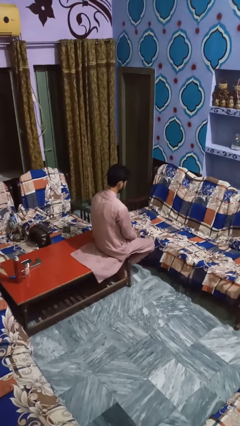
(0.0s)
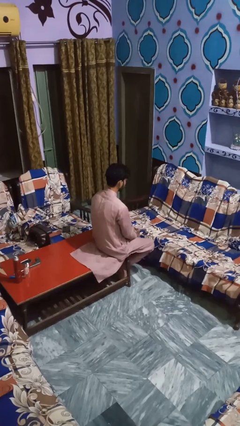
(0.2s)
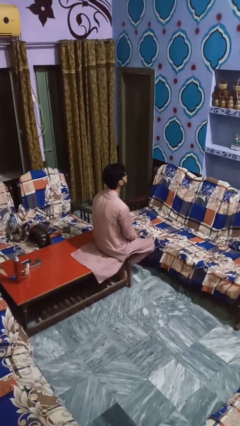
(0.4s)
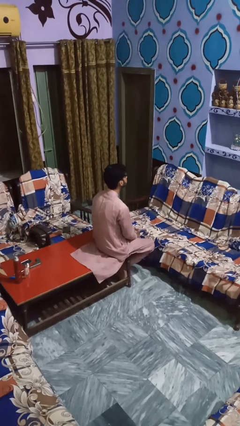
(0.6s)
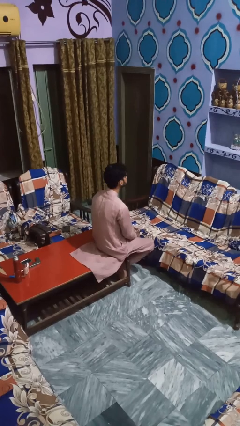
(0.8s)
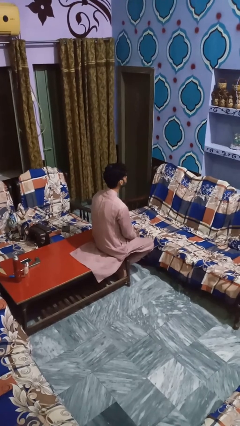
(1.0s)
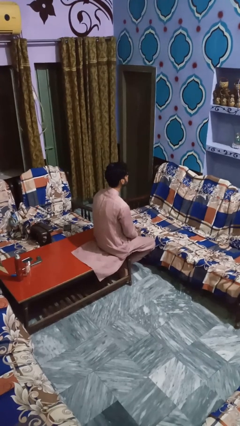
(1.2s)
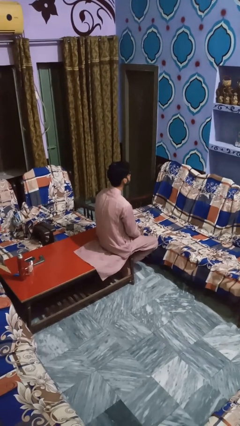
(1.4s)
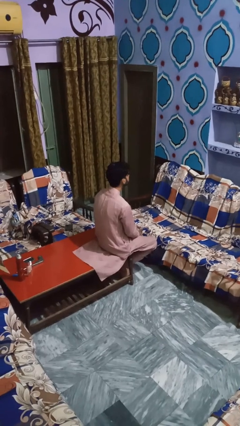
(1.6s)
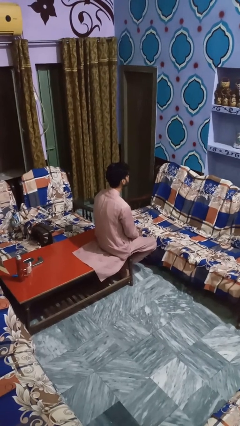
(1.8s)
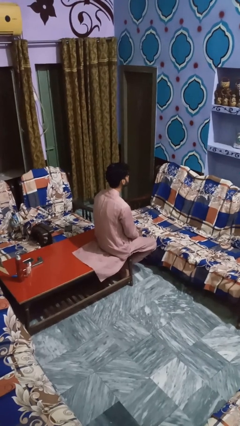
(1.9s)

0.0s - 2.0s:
person shakes head

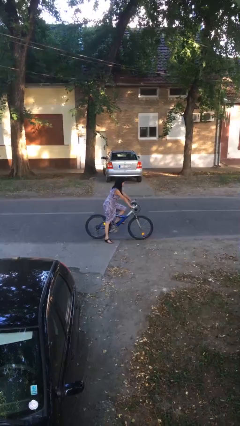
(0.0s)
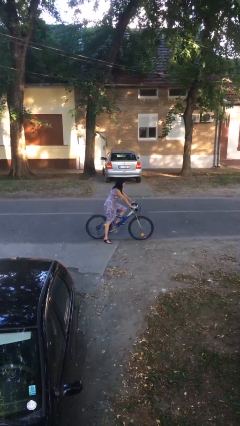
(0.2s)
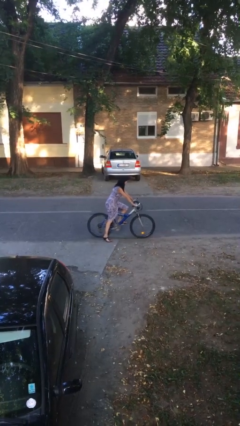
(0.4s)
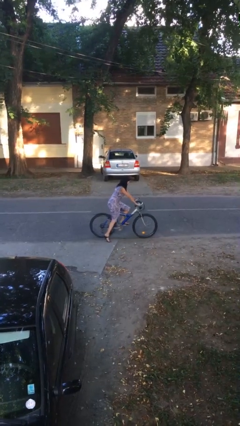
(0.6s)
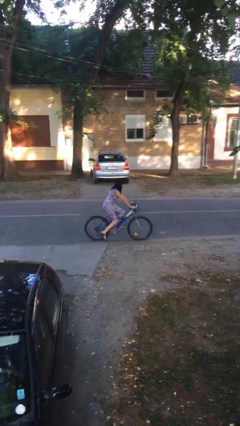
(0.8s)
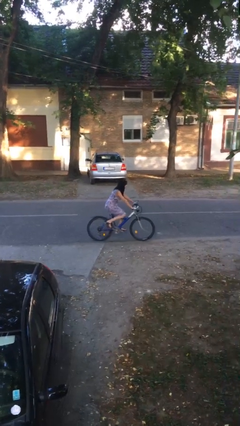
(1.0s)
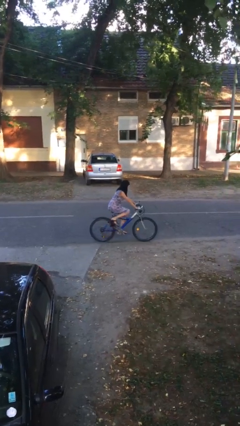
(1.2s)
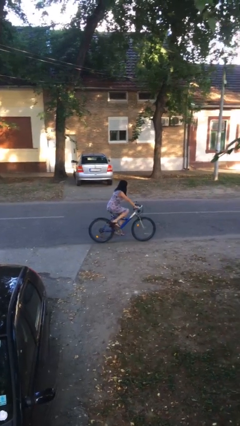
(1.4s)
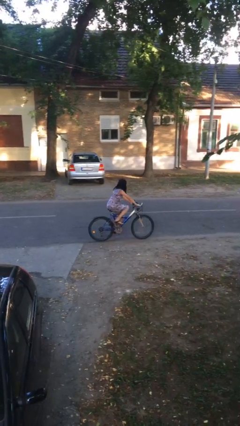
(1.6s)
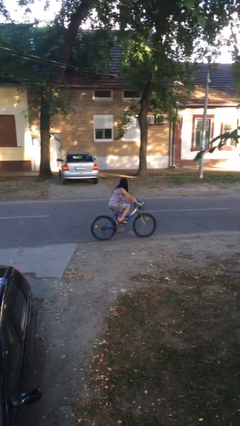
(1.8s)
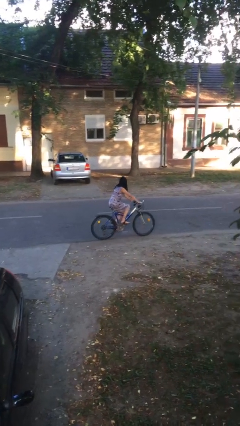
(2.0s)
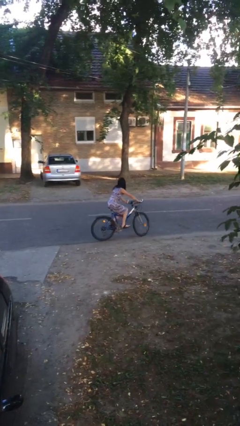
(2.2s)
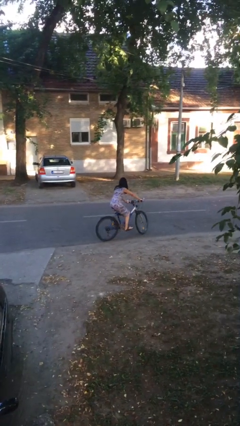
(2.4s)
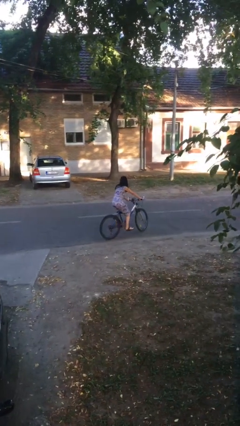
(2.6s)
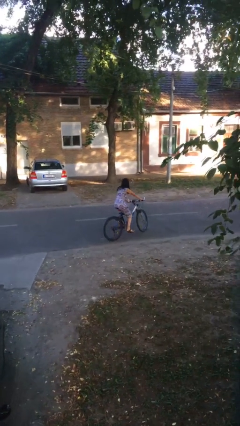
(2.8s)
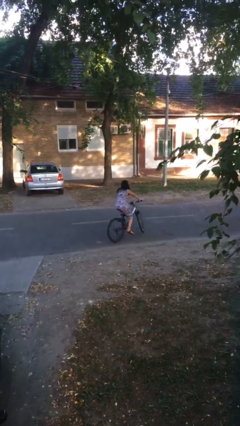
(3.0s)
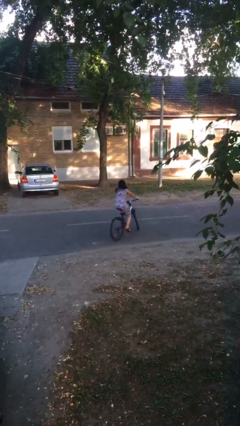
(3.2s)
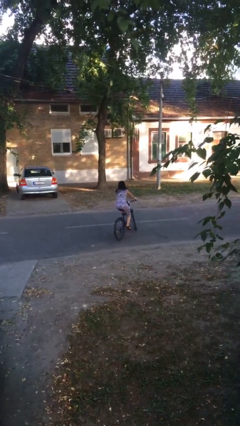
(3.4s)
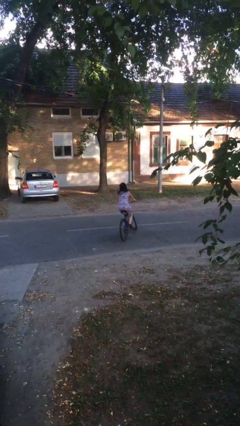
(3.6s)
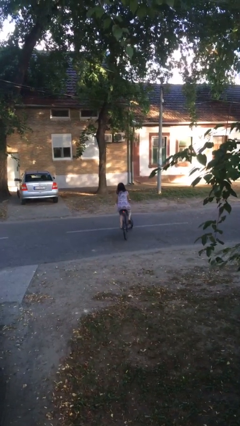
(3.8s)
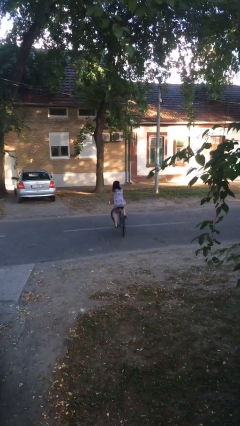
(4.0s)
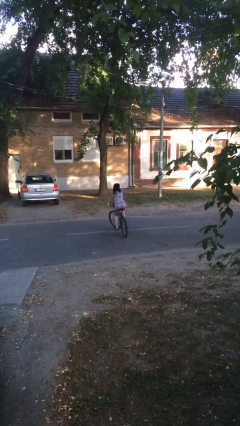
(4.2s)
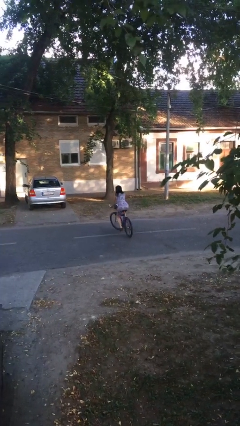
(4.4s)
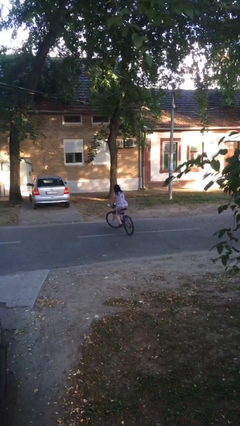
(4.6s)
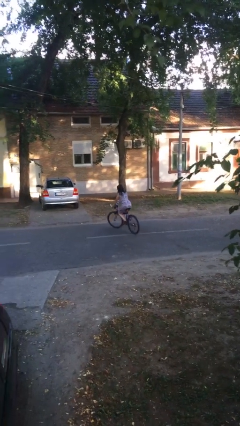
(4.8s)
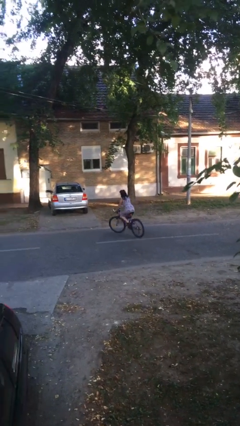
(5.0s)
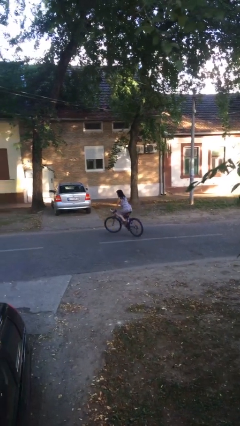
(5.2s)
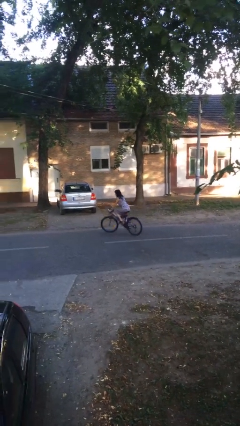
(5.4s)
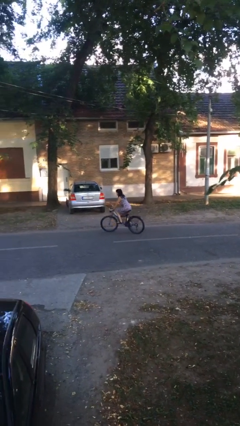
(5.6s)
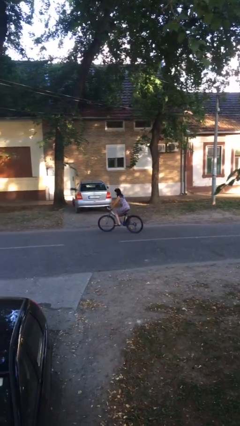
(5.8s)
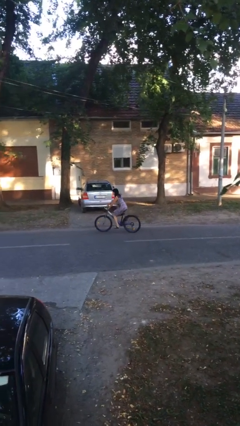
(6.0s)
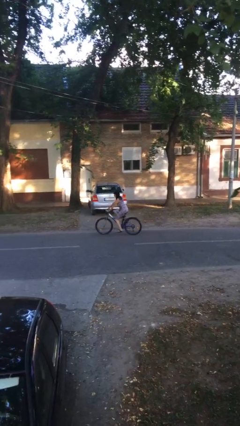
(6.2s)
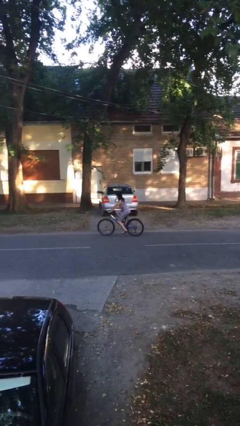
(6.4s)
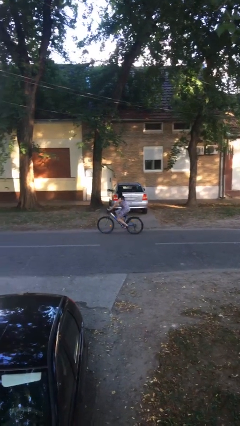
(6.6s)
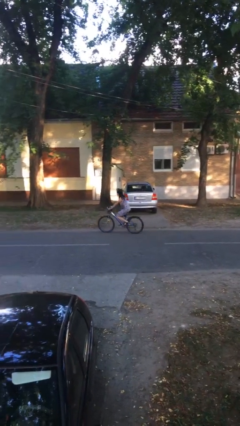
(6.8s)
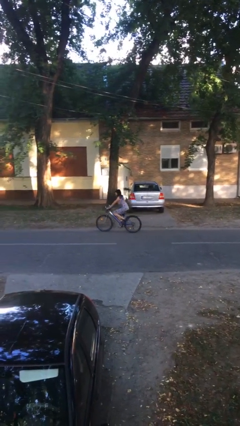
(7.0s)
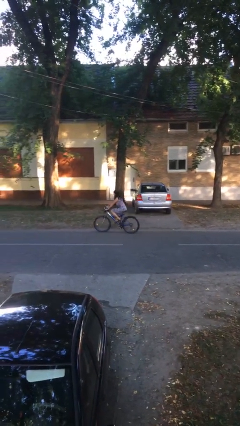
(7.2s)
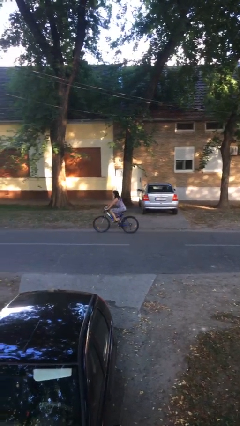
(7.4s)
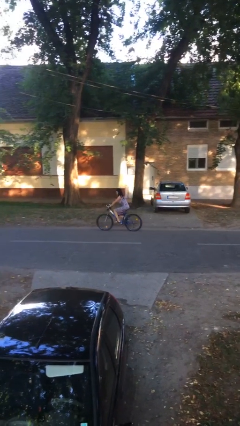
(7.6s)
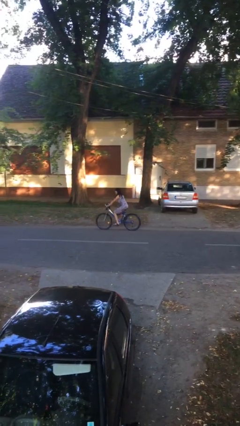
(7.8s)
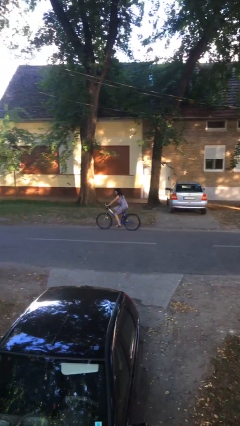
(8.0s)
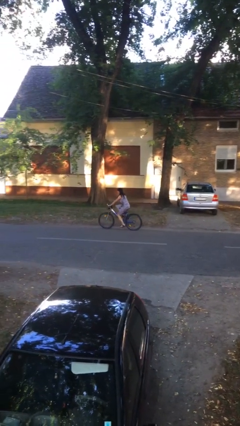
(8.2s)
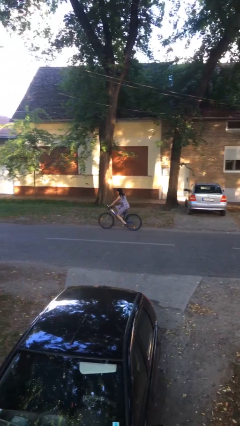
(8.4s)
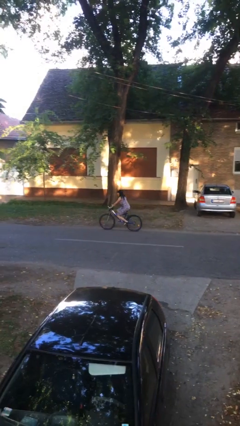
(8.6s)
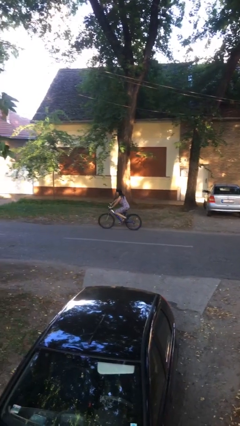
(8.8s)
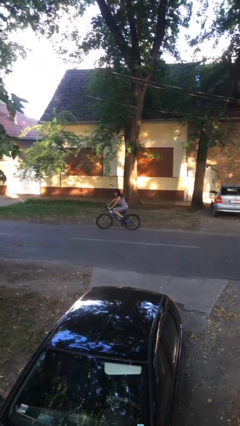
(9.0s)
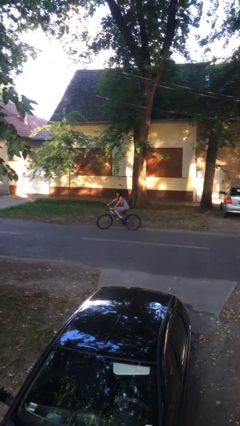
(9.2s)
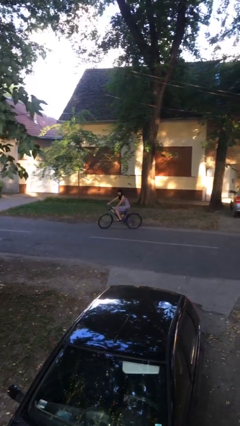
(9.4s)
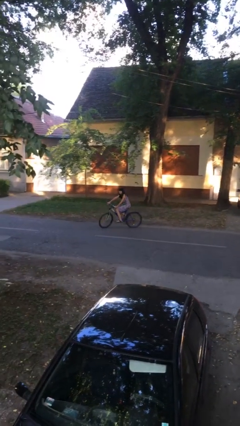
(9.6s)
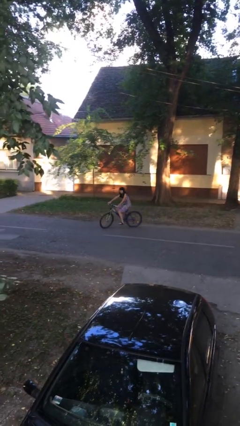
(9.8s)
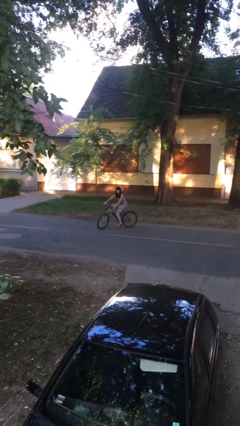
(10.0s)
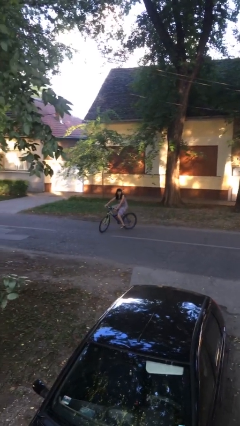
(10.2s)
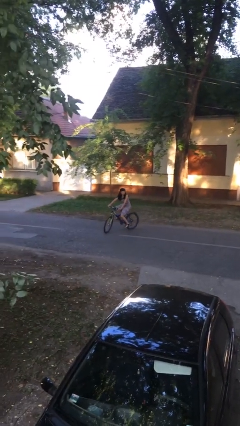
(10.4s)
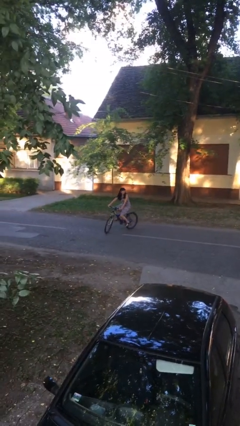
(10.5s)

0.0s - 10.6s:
person rides bicycle

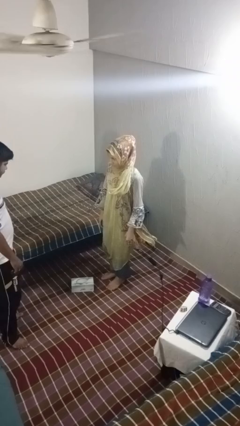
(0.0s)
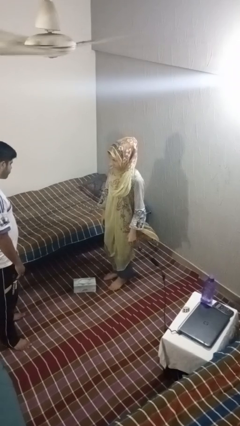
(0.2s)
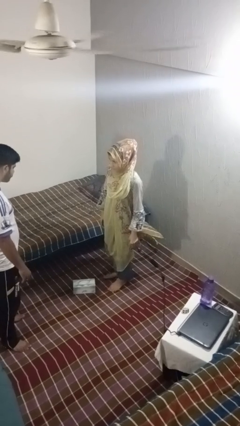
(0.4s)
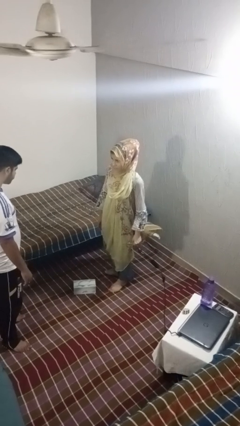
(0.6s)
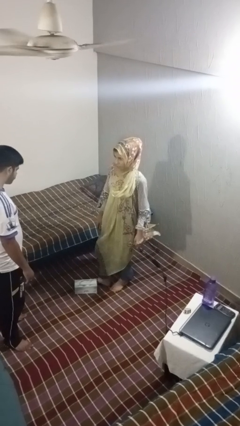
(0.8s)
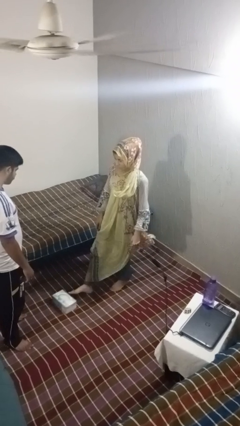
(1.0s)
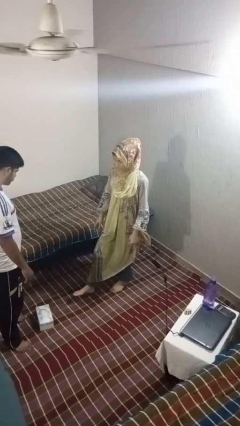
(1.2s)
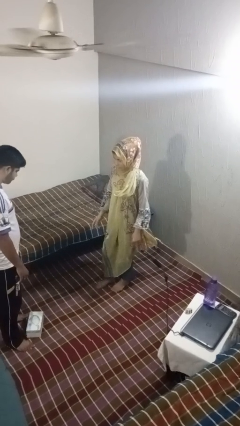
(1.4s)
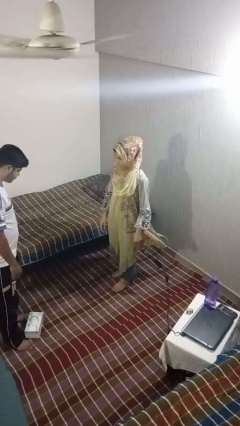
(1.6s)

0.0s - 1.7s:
person kicks object to person

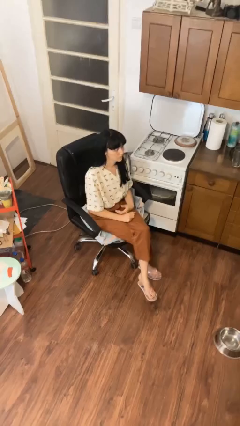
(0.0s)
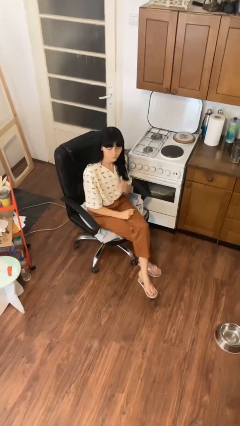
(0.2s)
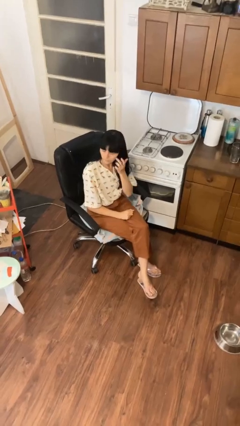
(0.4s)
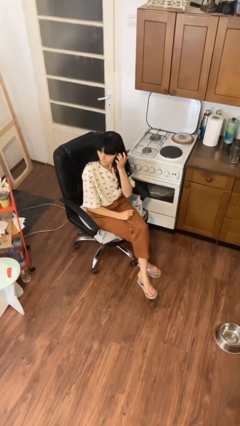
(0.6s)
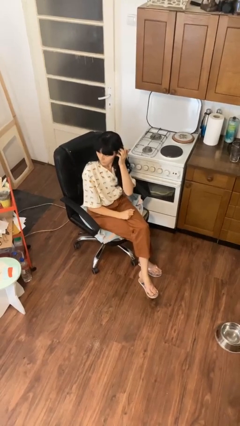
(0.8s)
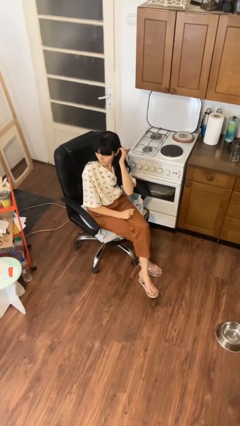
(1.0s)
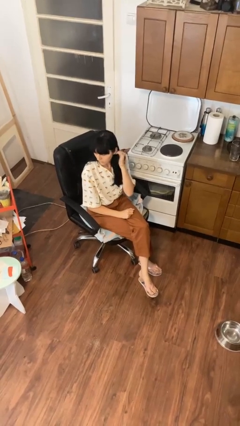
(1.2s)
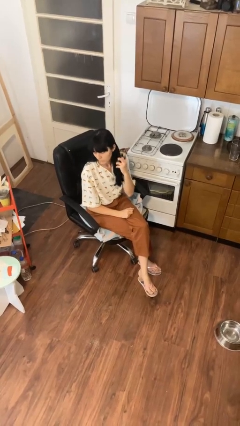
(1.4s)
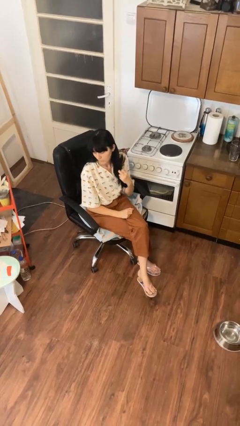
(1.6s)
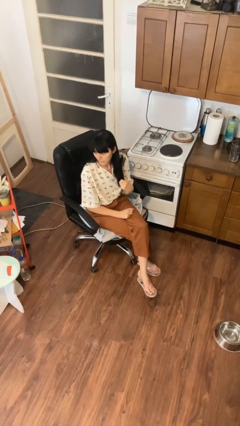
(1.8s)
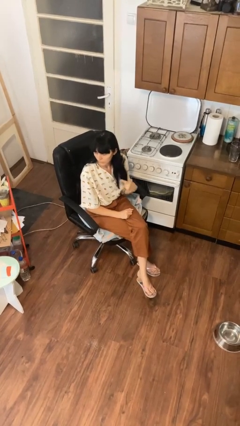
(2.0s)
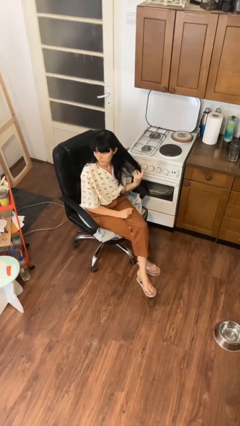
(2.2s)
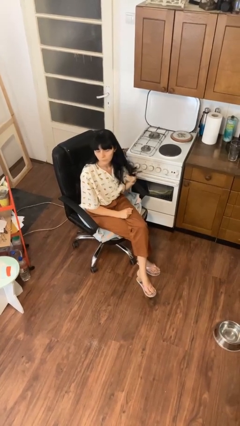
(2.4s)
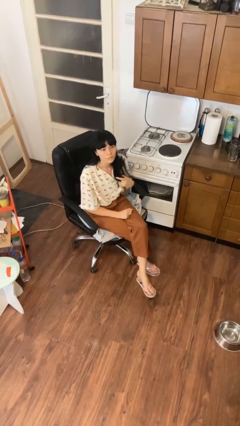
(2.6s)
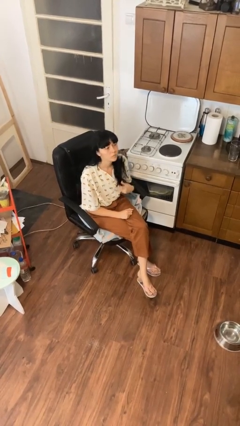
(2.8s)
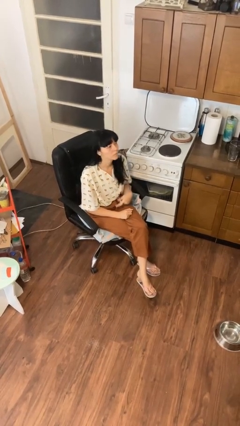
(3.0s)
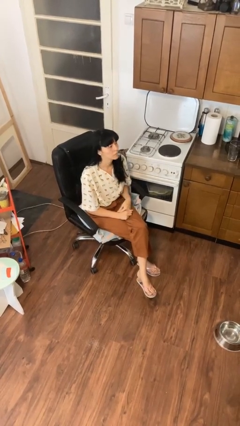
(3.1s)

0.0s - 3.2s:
person strokes hair
